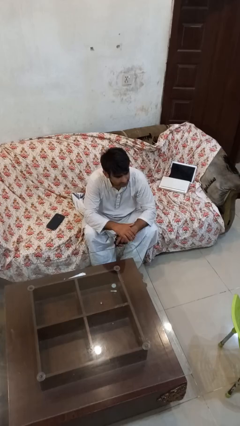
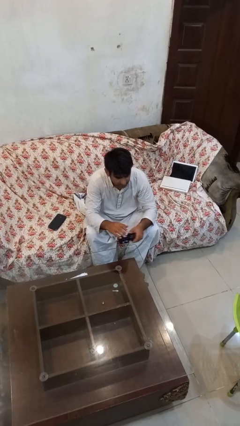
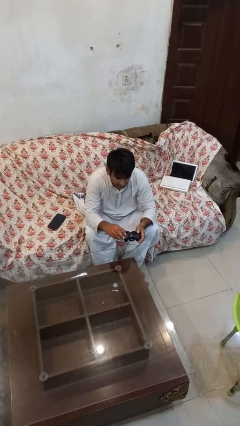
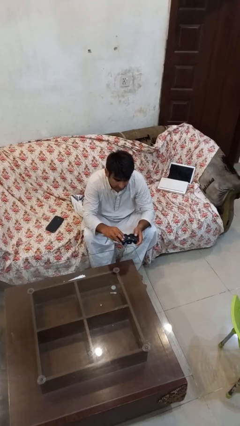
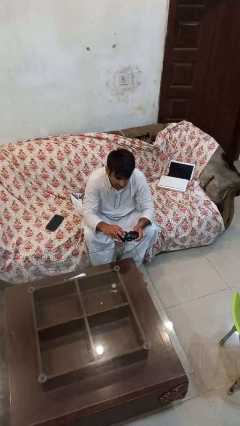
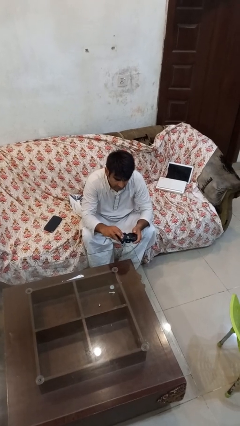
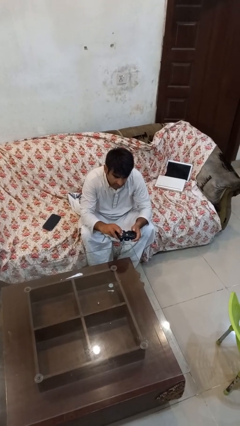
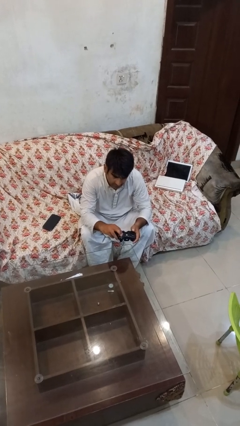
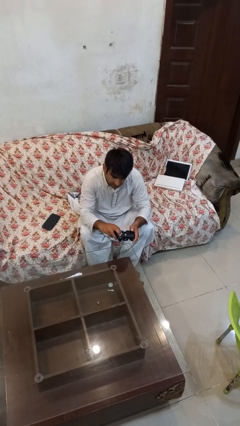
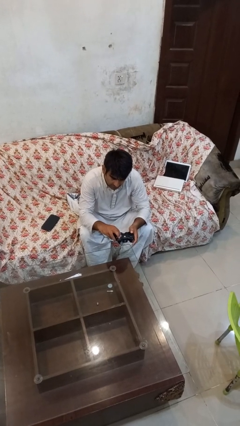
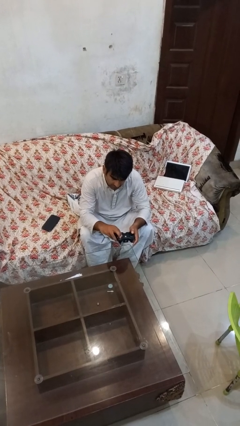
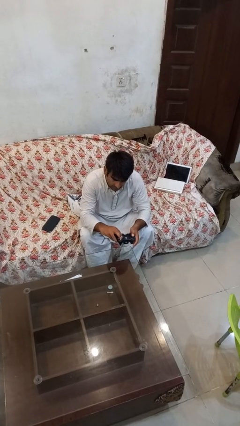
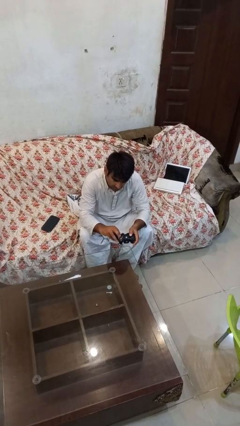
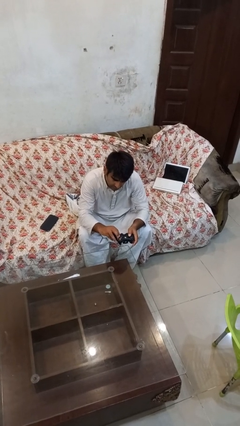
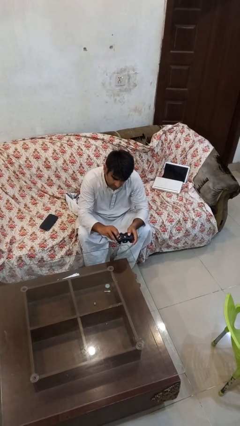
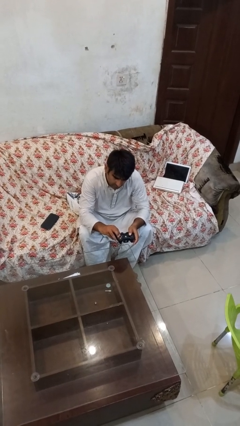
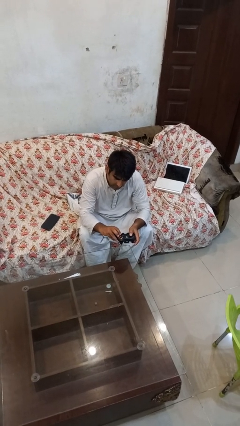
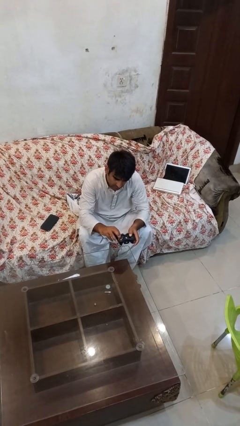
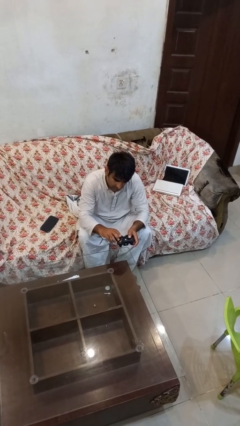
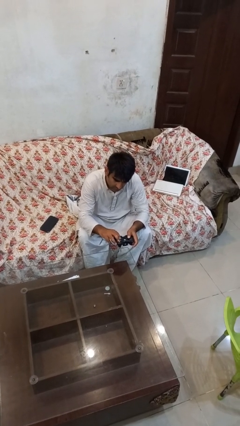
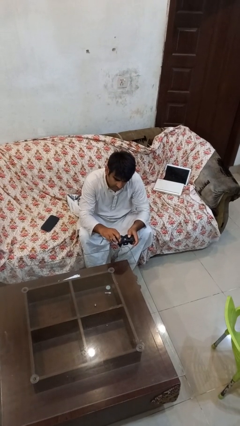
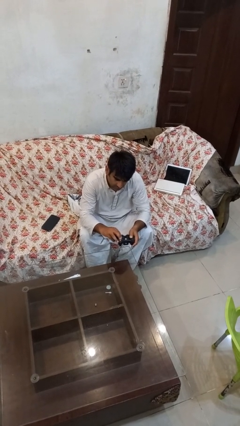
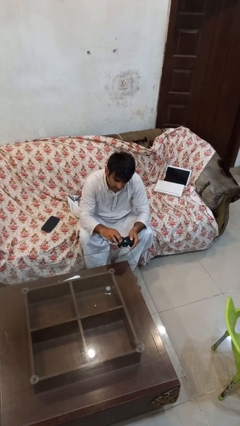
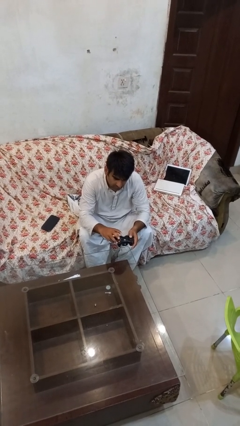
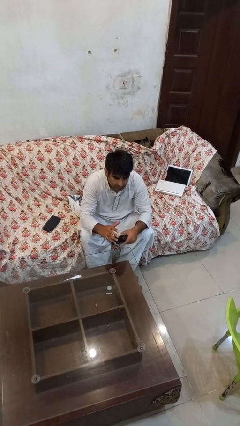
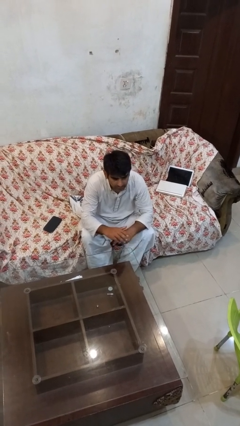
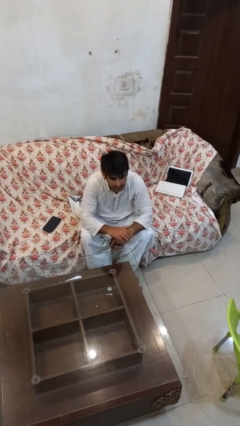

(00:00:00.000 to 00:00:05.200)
person interacts with handheld game

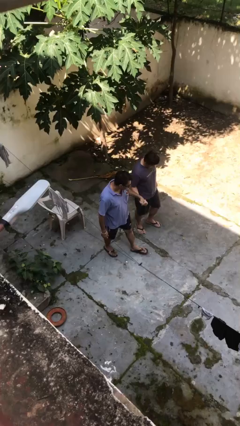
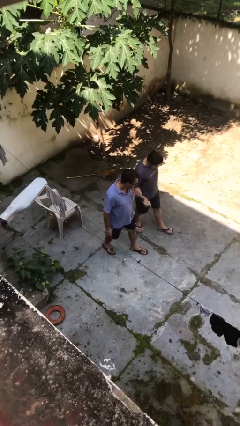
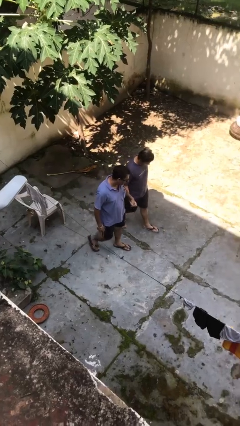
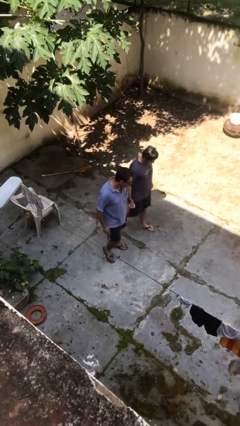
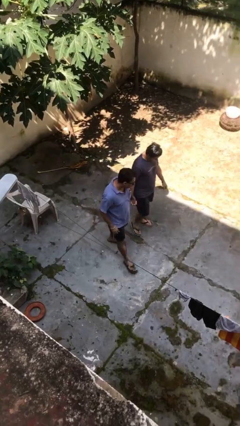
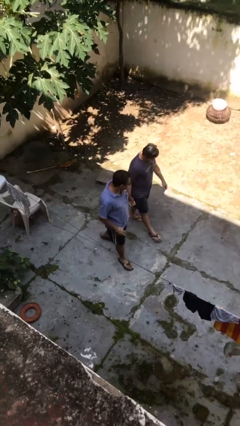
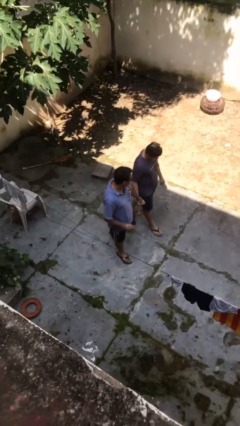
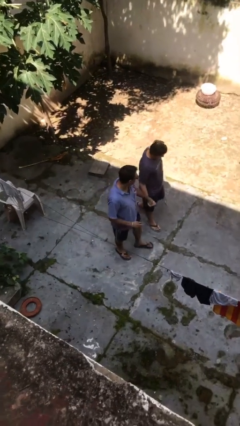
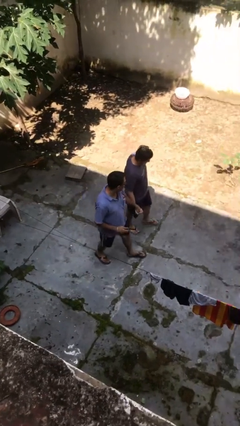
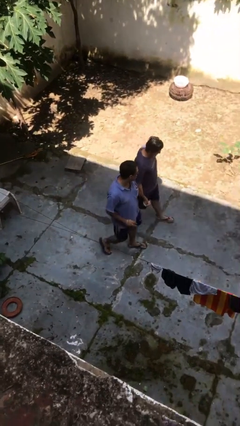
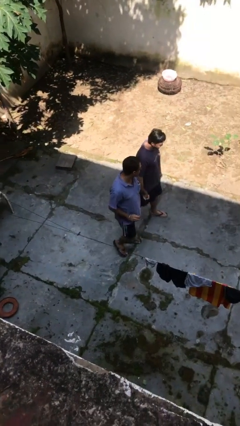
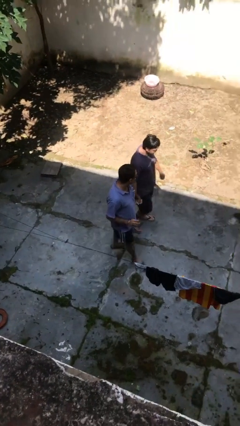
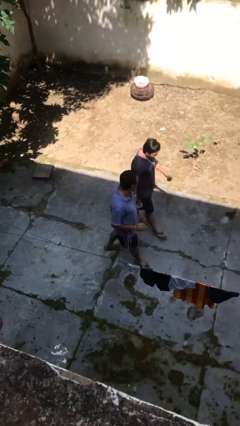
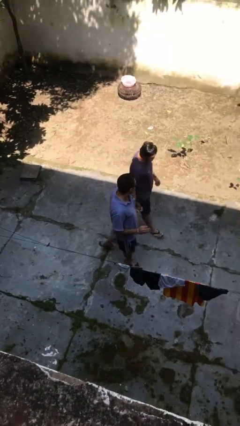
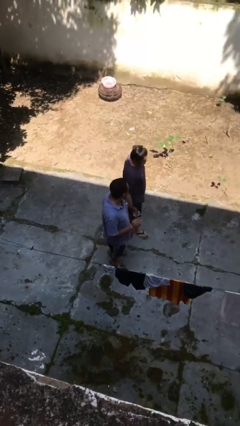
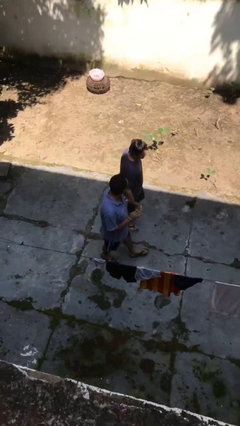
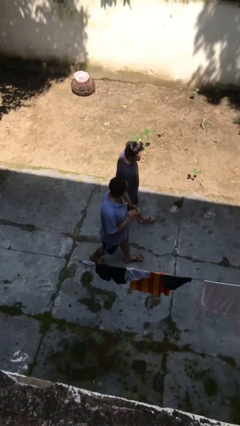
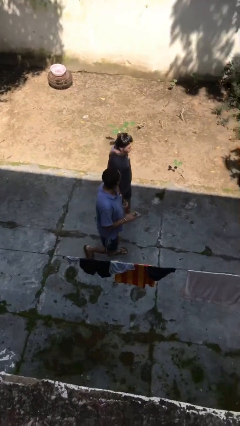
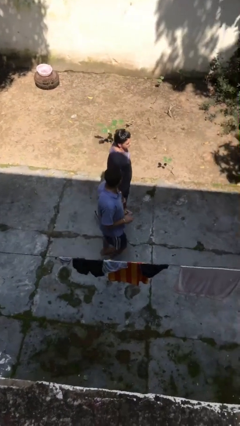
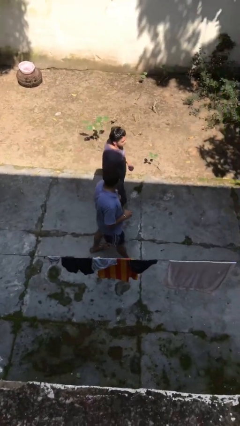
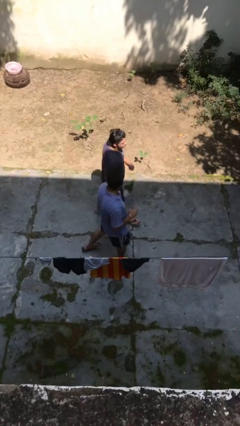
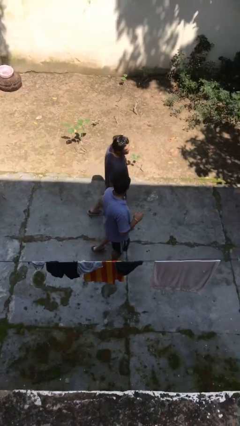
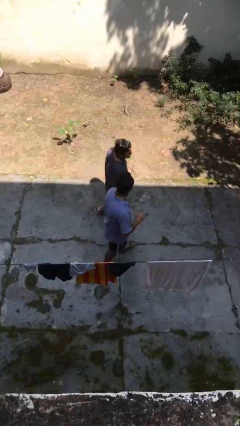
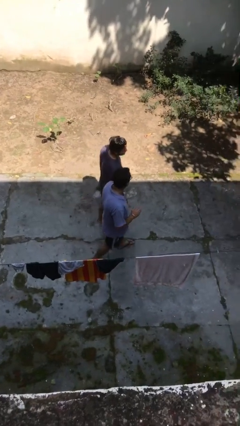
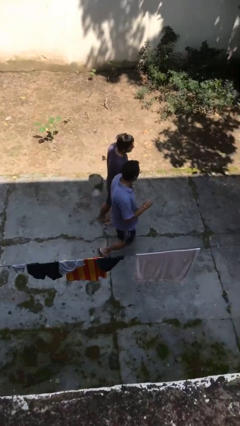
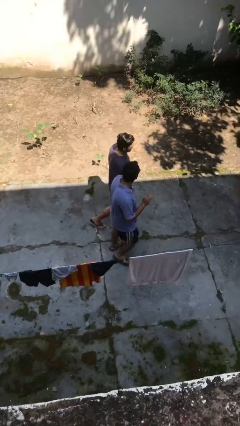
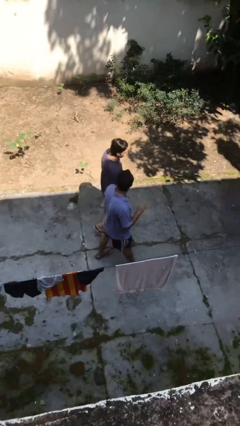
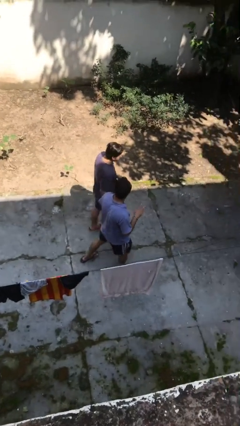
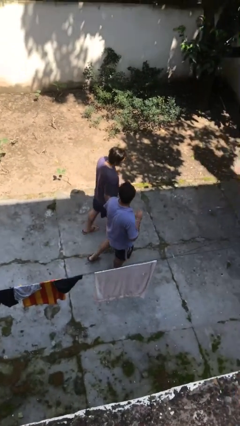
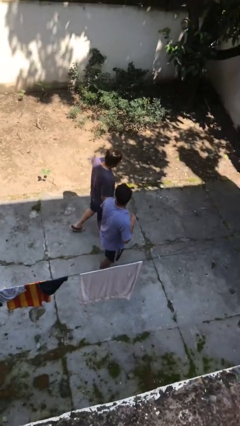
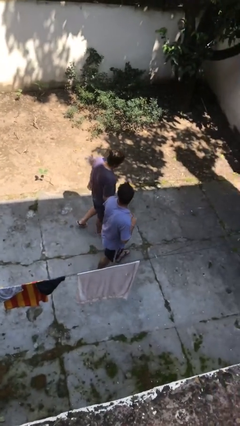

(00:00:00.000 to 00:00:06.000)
person holds hand

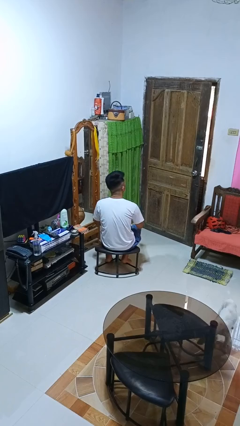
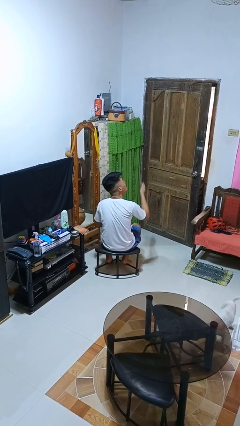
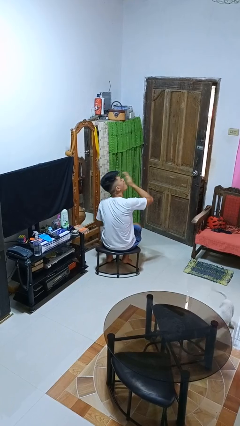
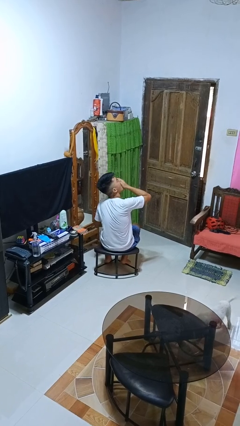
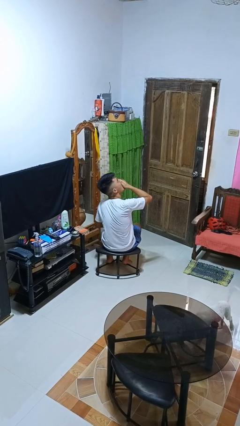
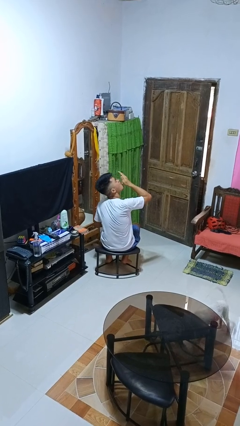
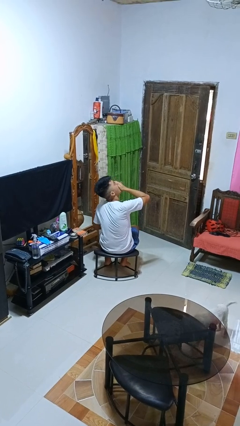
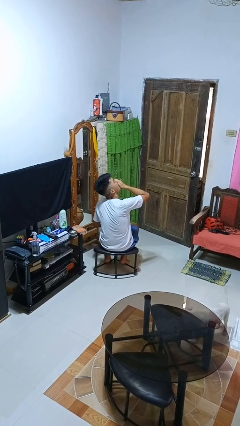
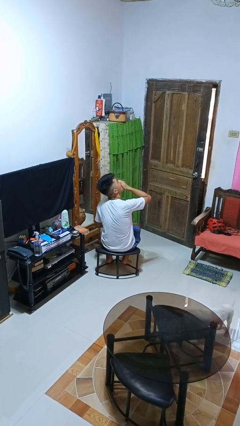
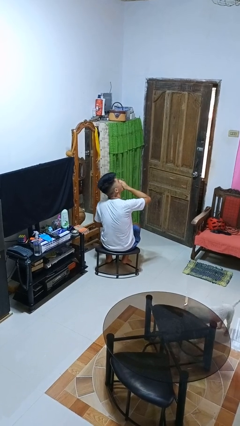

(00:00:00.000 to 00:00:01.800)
person yawns

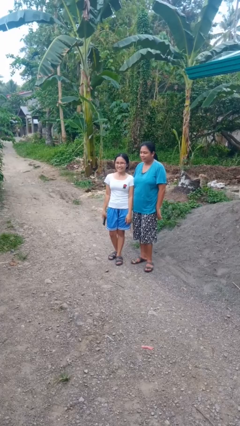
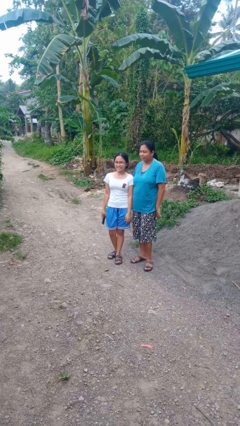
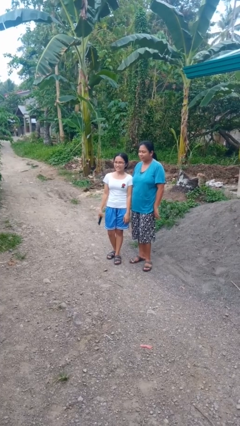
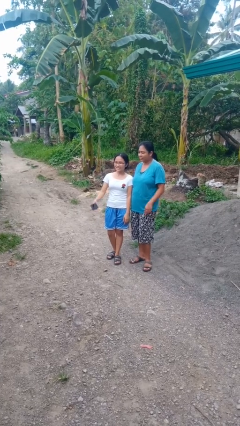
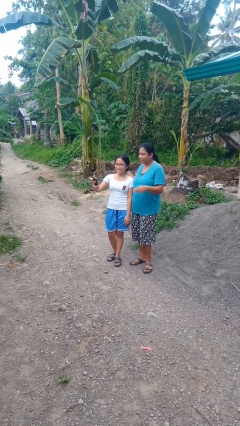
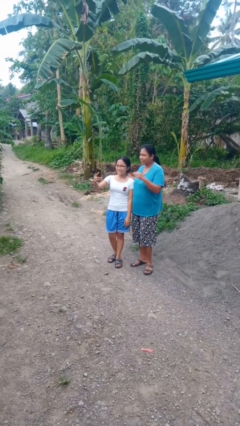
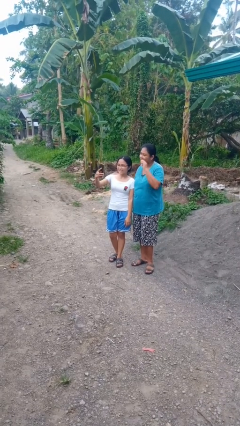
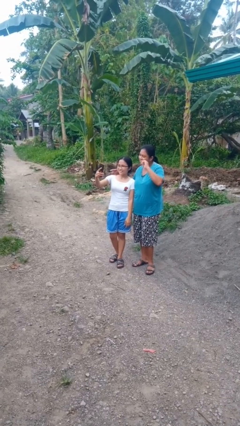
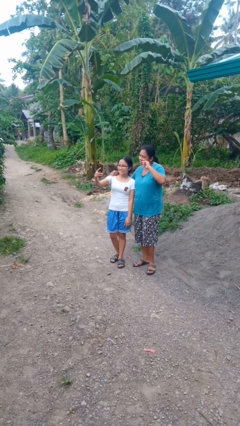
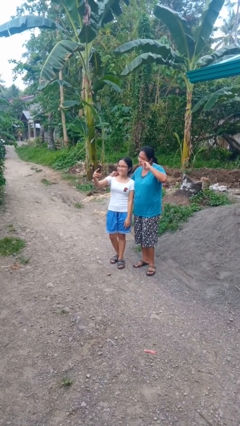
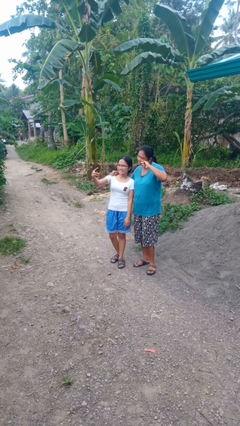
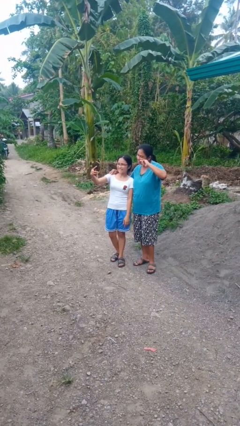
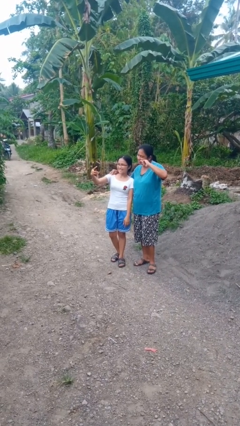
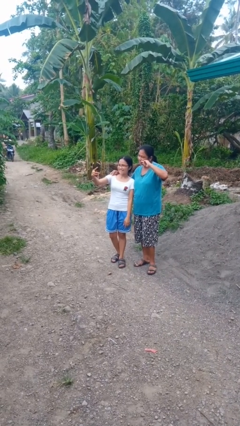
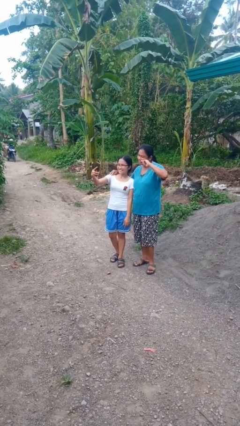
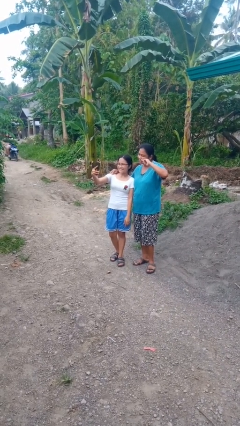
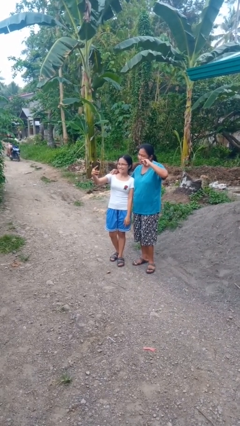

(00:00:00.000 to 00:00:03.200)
person takes selfie with person

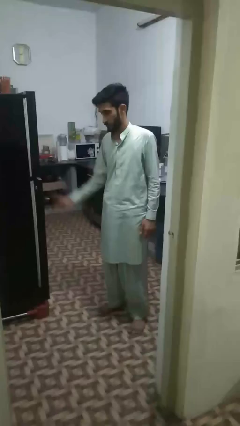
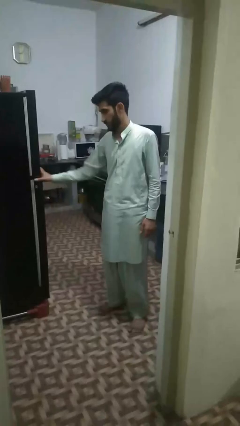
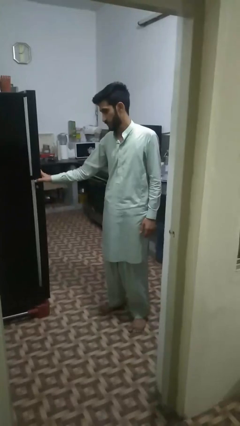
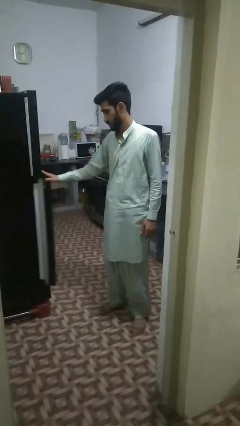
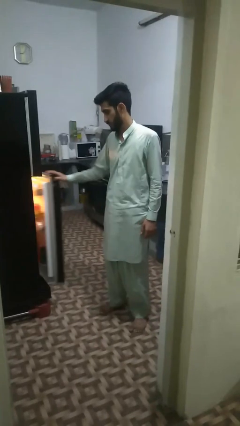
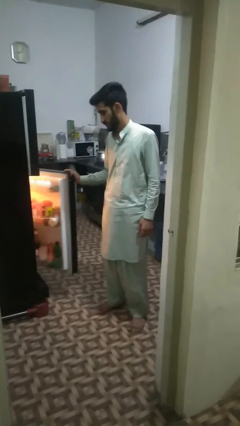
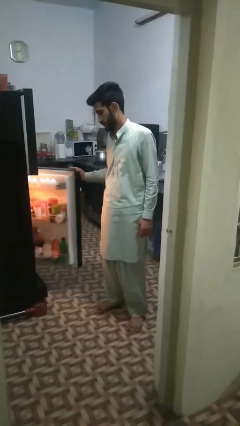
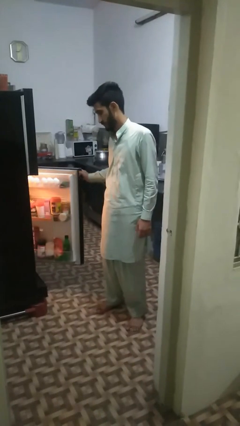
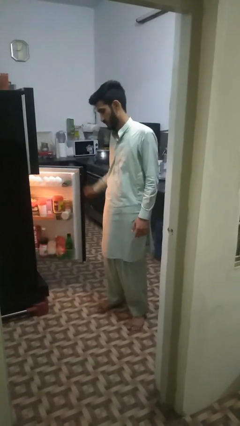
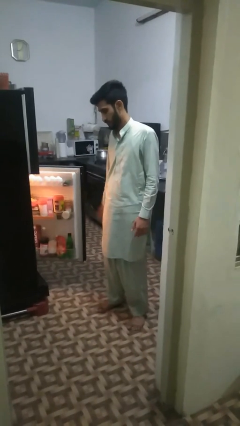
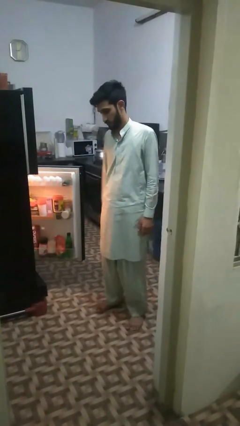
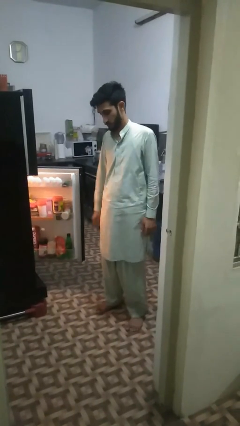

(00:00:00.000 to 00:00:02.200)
person opens refrigerator
